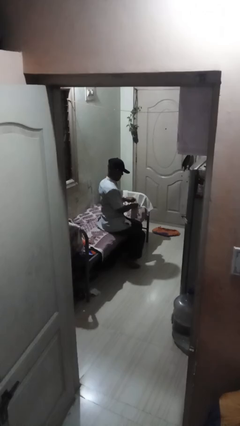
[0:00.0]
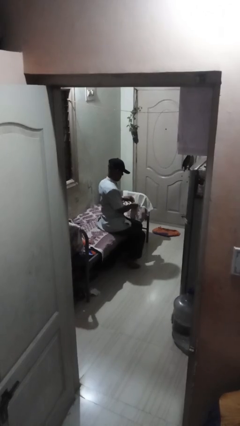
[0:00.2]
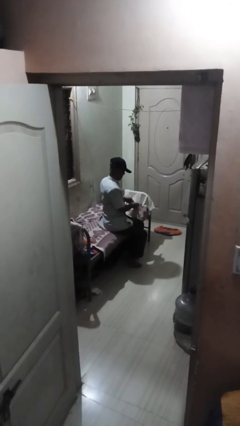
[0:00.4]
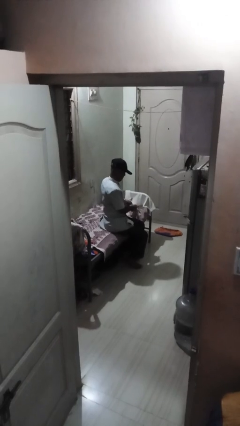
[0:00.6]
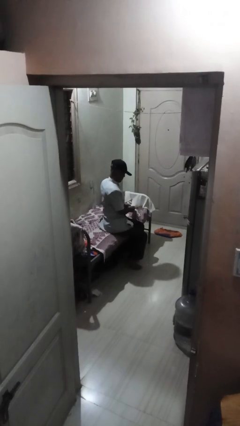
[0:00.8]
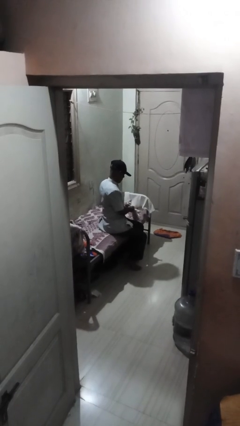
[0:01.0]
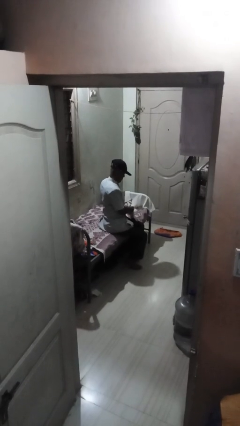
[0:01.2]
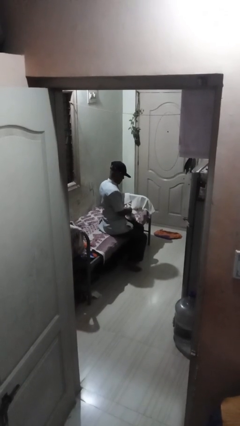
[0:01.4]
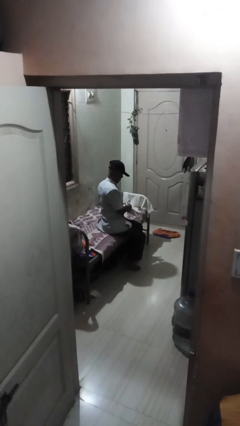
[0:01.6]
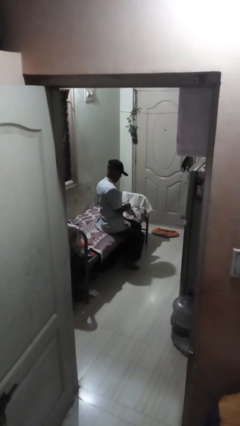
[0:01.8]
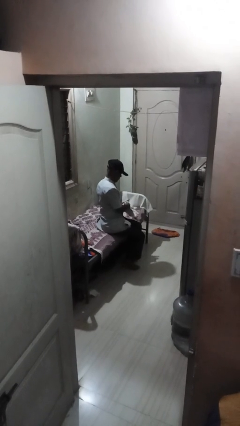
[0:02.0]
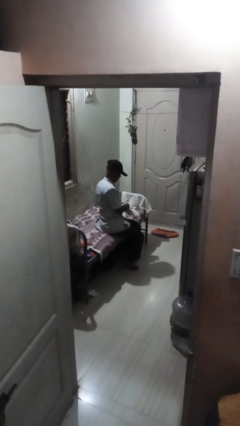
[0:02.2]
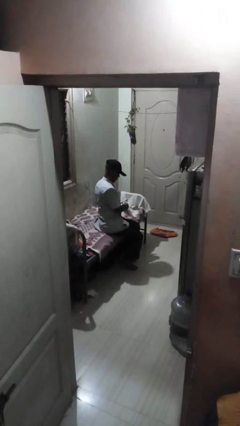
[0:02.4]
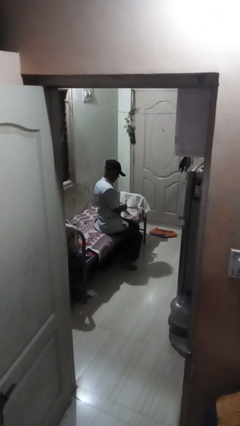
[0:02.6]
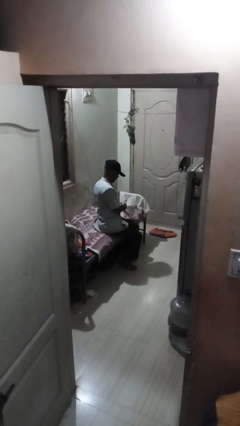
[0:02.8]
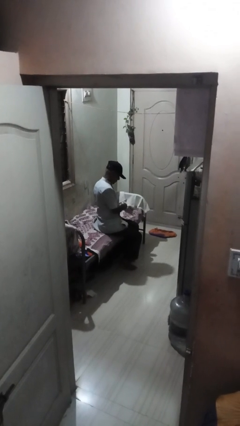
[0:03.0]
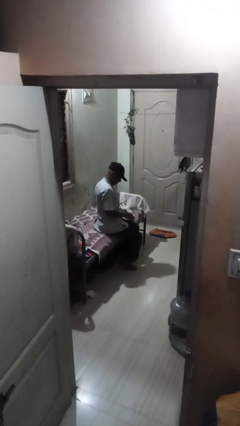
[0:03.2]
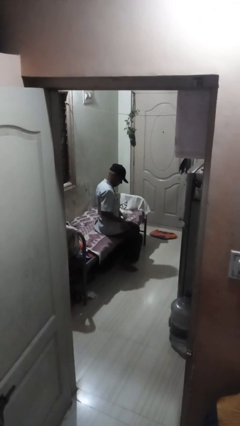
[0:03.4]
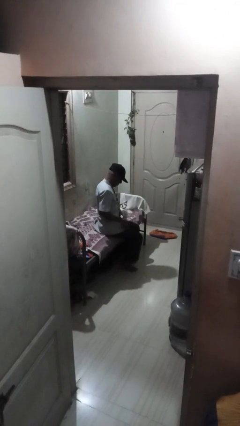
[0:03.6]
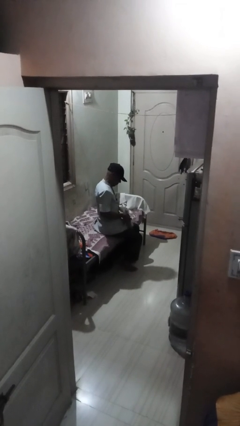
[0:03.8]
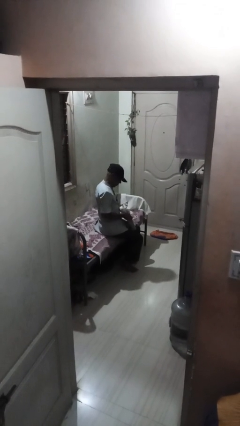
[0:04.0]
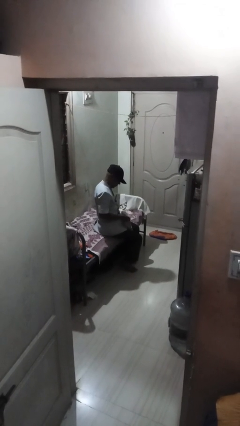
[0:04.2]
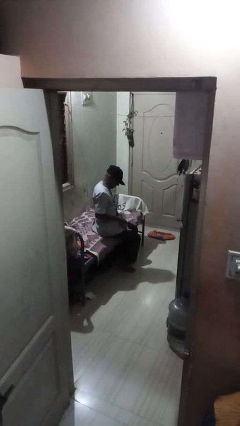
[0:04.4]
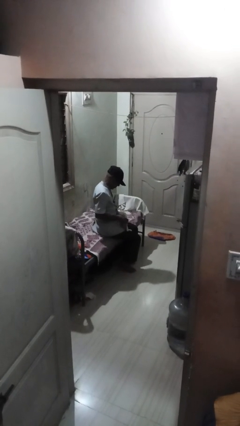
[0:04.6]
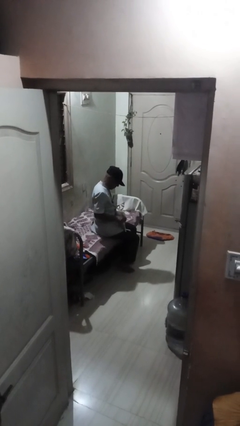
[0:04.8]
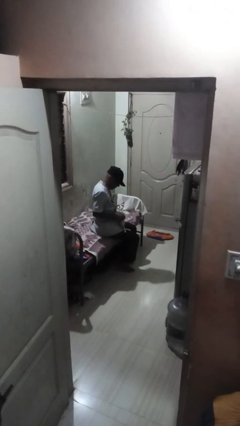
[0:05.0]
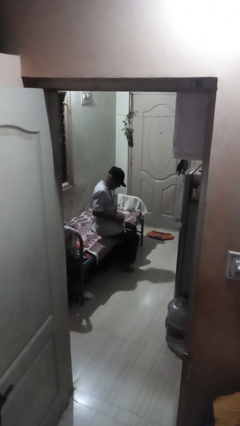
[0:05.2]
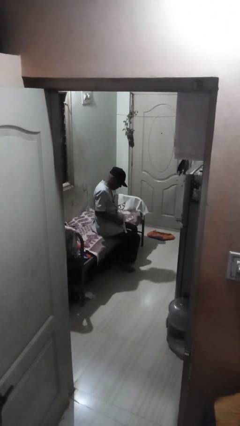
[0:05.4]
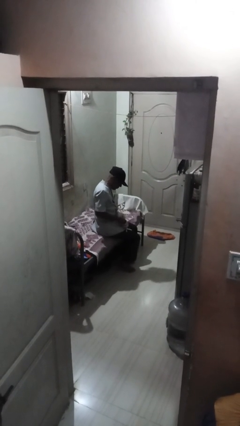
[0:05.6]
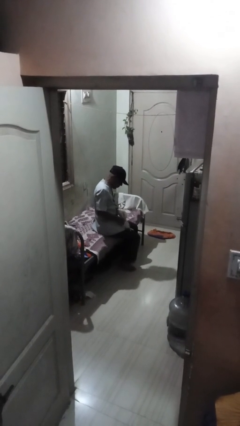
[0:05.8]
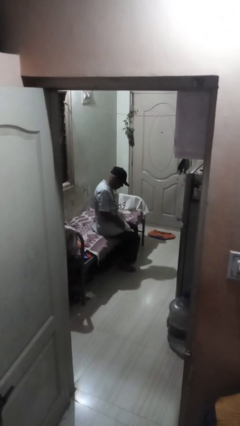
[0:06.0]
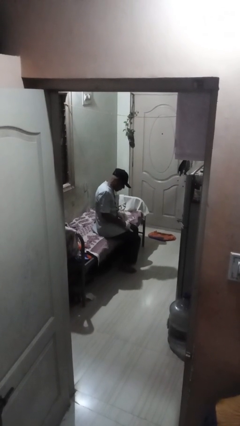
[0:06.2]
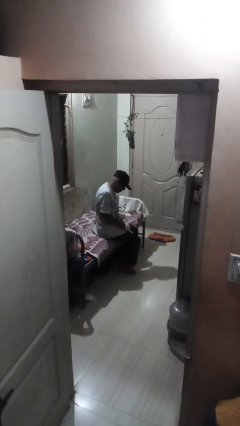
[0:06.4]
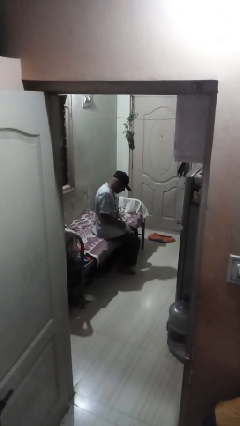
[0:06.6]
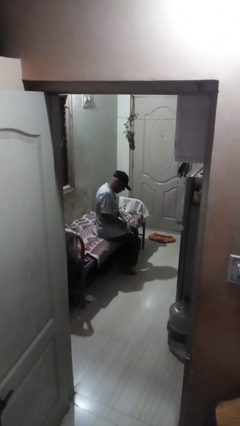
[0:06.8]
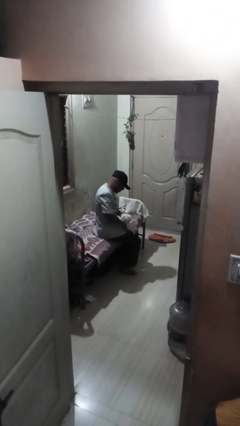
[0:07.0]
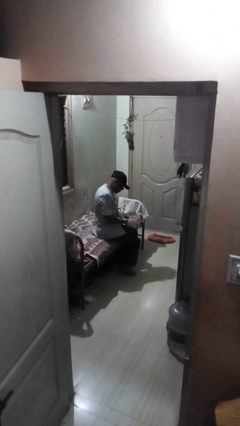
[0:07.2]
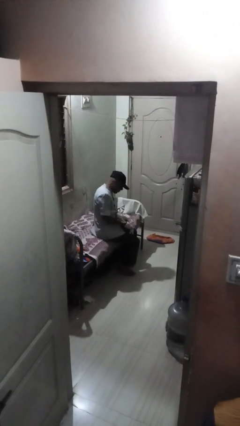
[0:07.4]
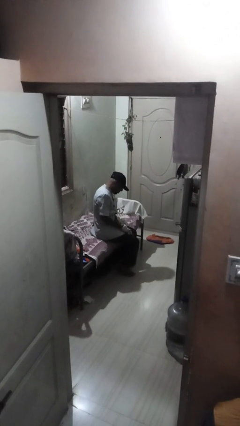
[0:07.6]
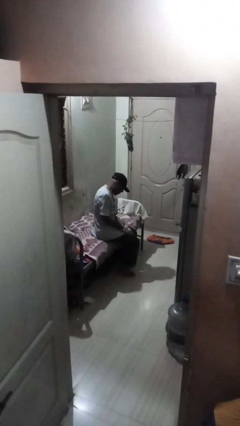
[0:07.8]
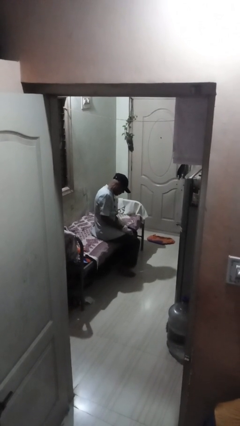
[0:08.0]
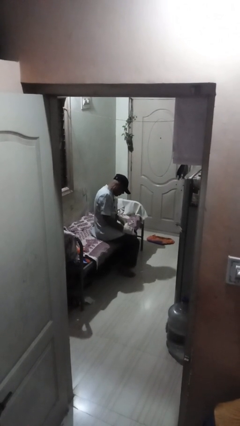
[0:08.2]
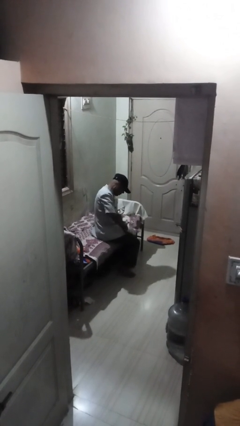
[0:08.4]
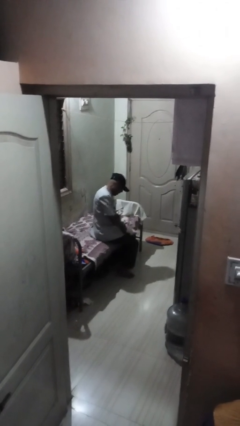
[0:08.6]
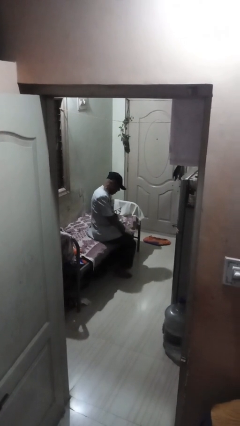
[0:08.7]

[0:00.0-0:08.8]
person puts on gloves

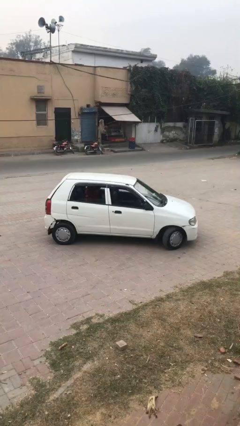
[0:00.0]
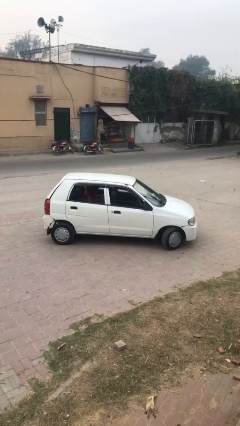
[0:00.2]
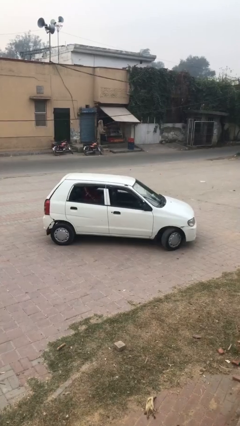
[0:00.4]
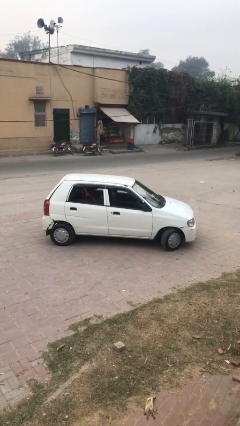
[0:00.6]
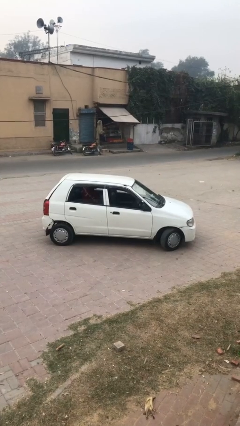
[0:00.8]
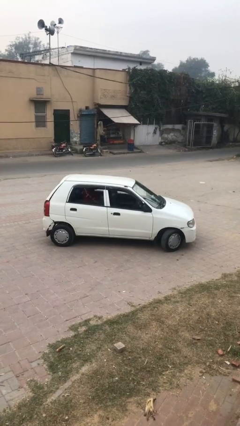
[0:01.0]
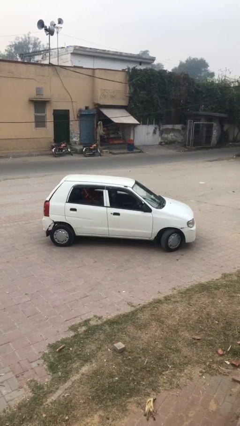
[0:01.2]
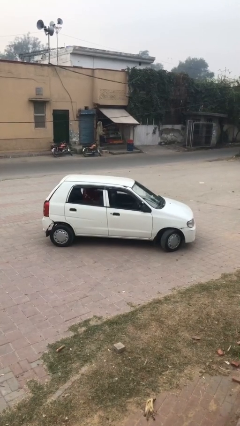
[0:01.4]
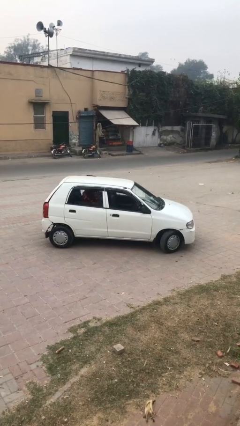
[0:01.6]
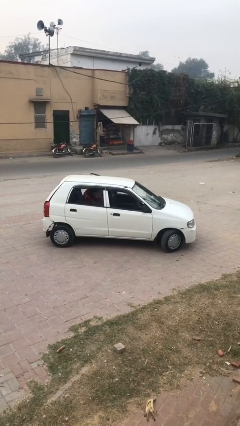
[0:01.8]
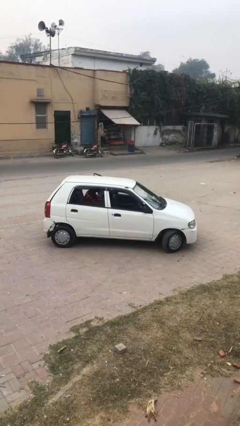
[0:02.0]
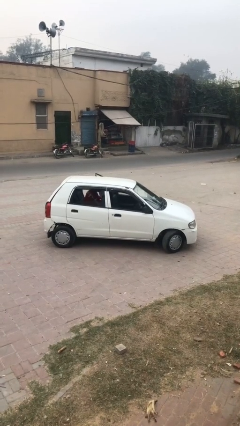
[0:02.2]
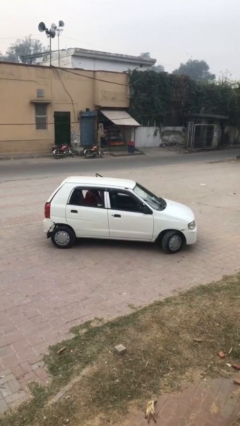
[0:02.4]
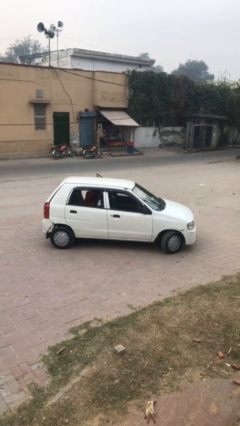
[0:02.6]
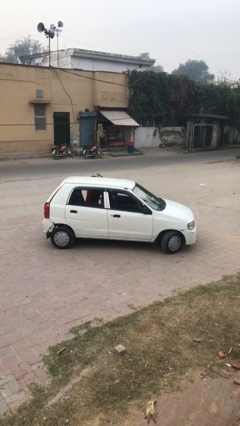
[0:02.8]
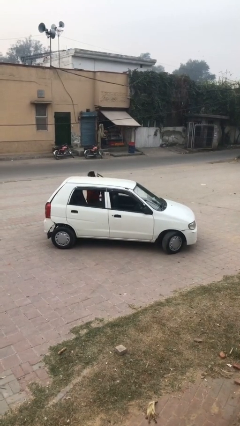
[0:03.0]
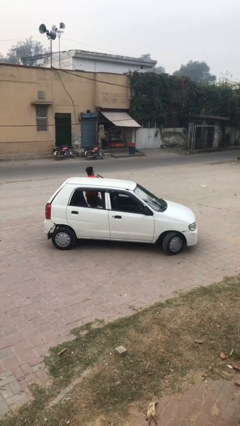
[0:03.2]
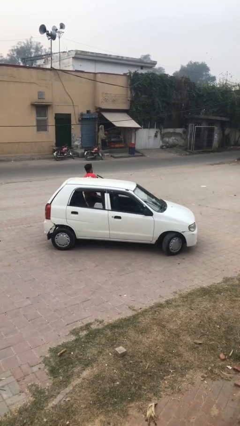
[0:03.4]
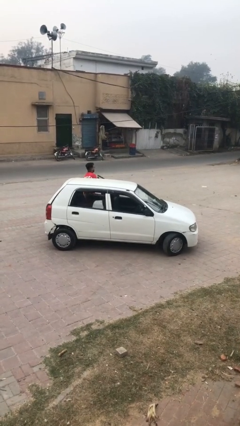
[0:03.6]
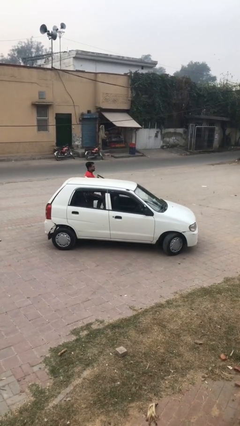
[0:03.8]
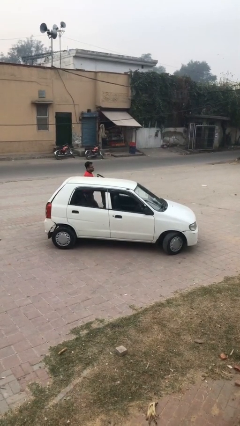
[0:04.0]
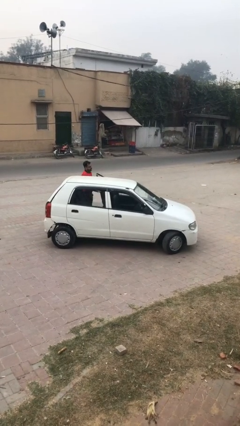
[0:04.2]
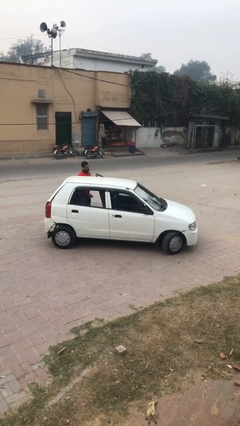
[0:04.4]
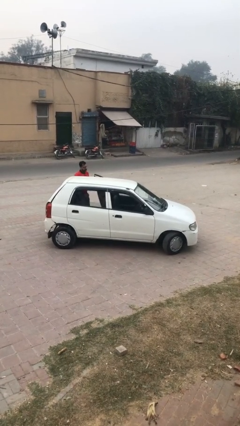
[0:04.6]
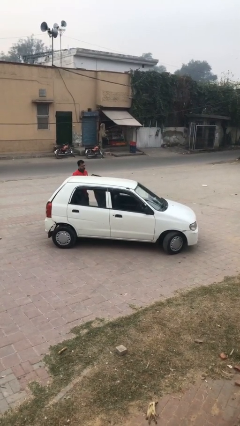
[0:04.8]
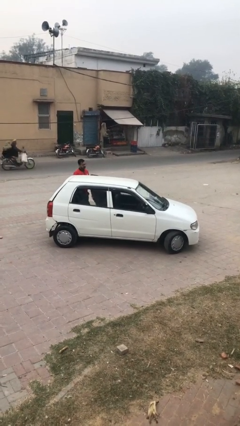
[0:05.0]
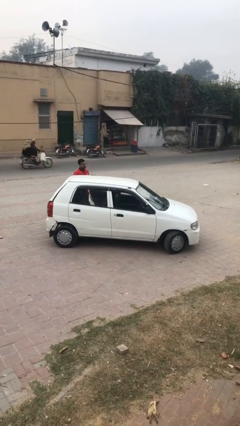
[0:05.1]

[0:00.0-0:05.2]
car drops off person

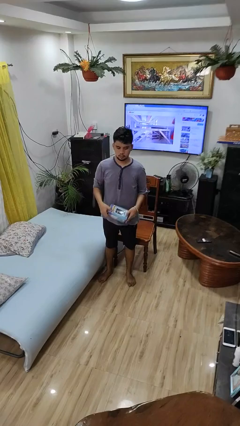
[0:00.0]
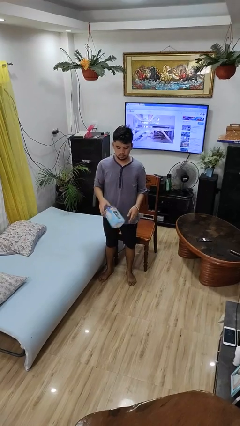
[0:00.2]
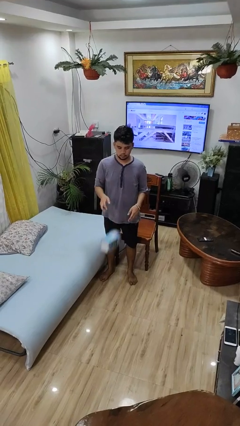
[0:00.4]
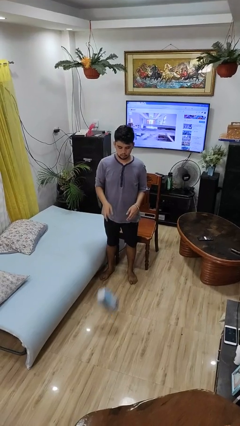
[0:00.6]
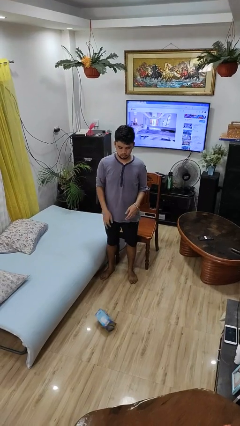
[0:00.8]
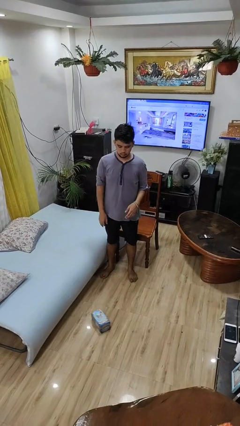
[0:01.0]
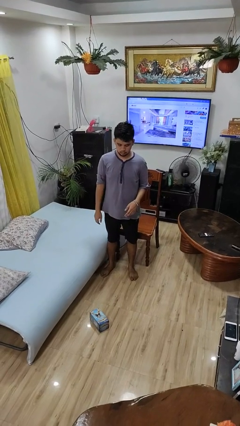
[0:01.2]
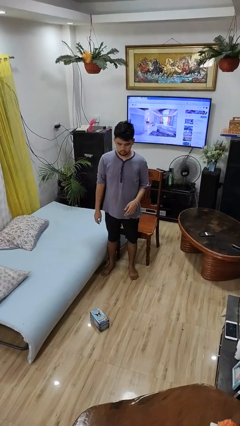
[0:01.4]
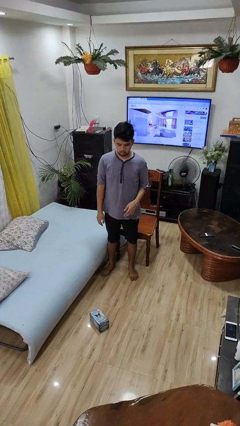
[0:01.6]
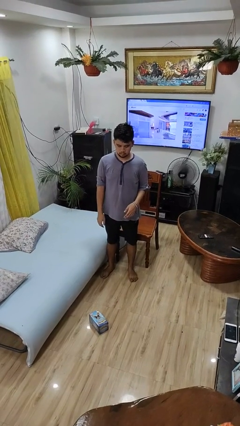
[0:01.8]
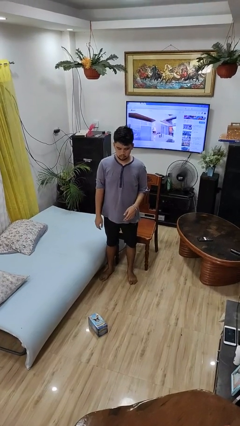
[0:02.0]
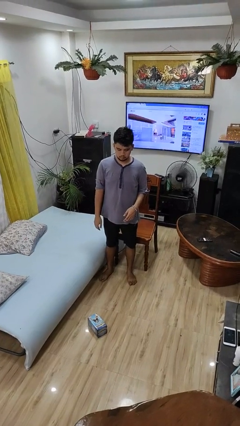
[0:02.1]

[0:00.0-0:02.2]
person throws object to ground

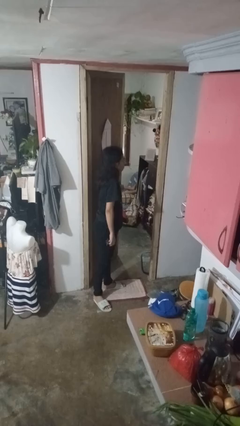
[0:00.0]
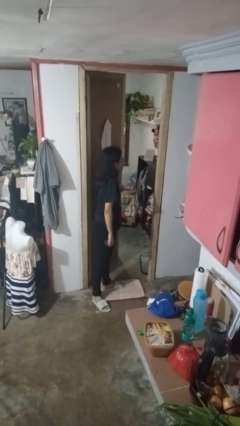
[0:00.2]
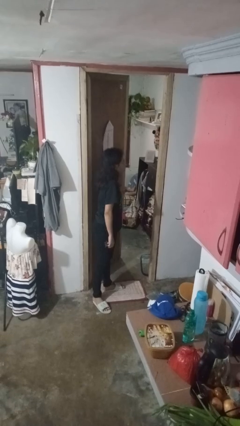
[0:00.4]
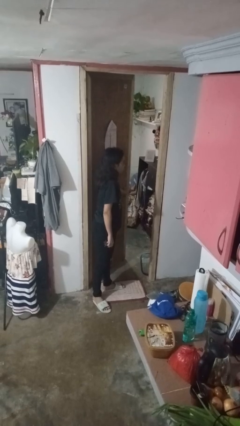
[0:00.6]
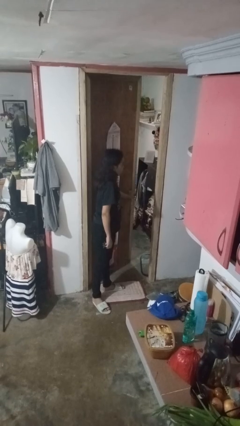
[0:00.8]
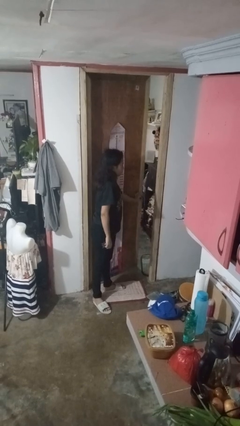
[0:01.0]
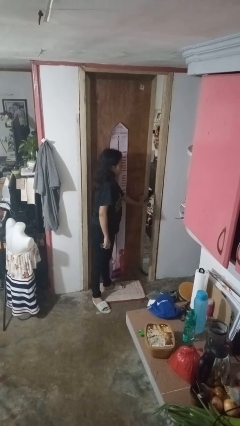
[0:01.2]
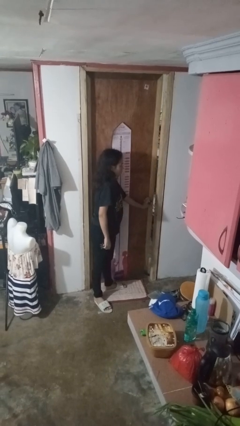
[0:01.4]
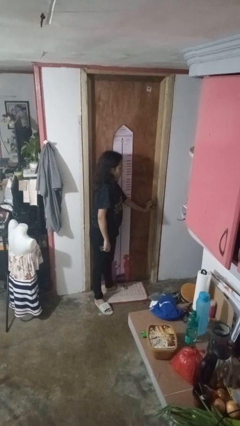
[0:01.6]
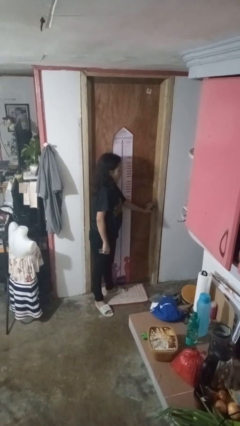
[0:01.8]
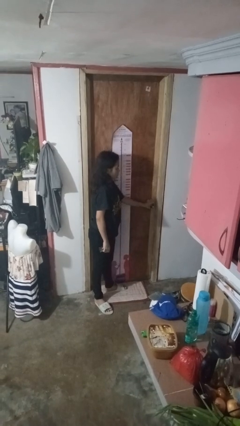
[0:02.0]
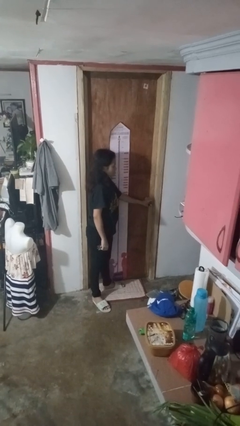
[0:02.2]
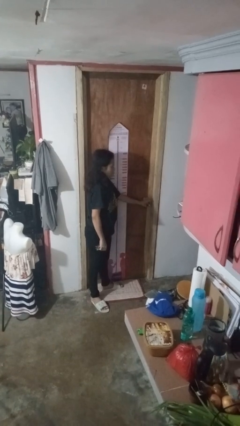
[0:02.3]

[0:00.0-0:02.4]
person closes facility door
